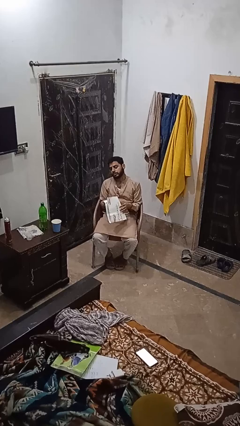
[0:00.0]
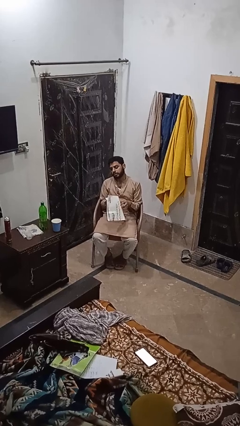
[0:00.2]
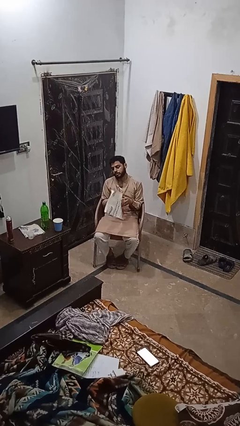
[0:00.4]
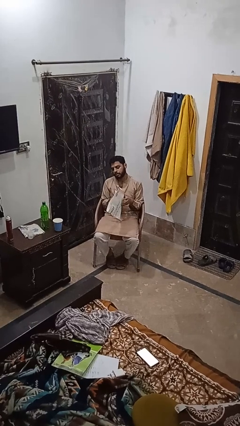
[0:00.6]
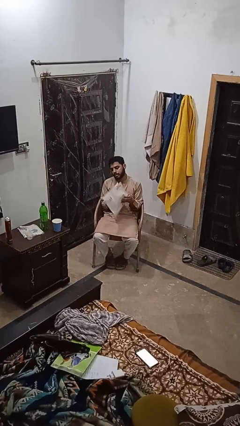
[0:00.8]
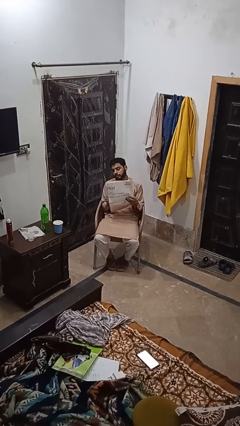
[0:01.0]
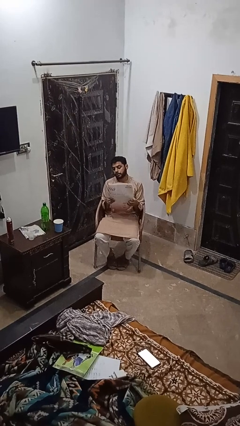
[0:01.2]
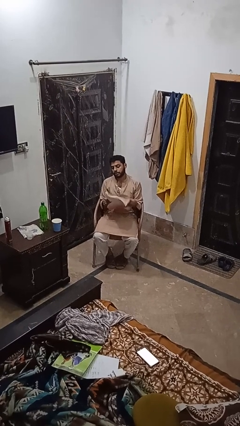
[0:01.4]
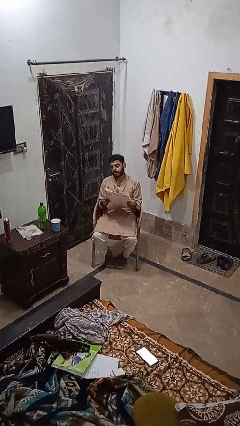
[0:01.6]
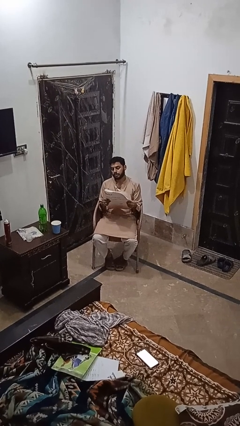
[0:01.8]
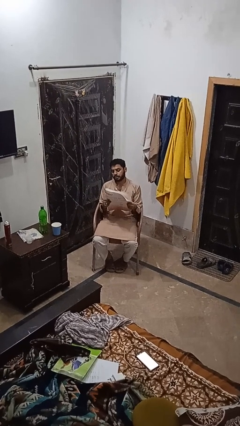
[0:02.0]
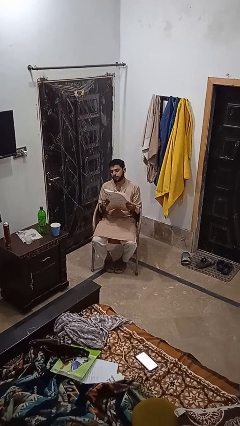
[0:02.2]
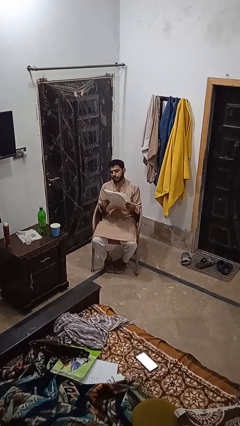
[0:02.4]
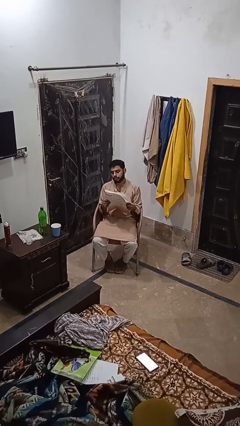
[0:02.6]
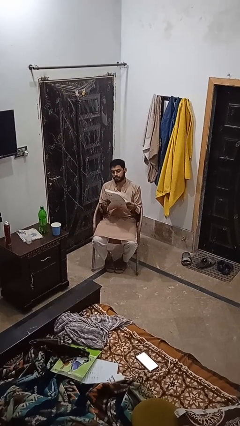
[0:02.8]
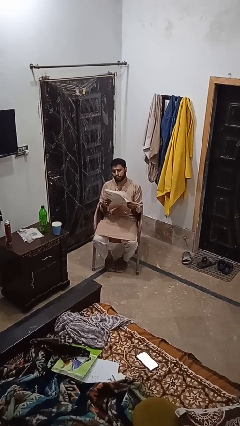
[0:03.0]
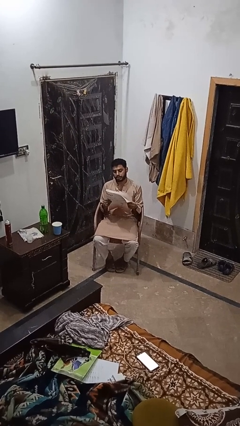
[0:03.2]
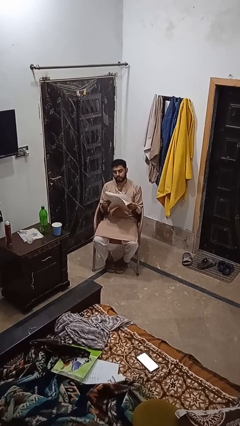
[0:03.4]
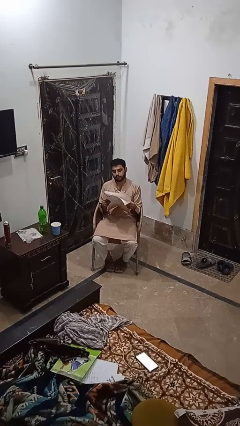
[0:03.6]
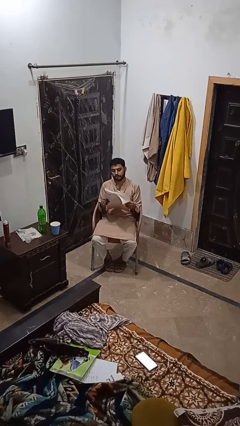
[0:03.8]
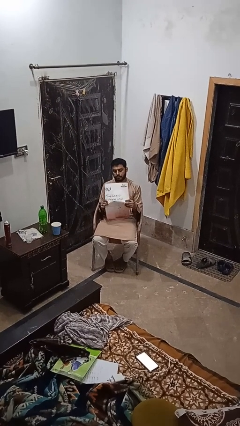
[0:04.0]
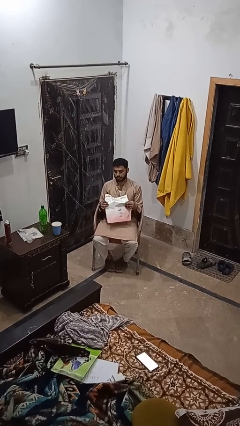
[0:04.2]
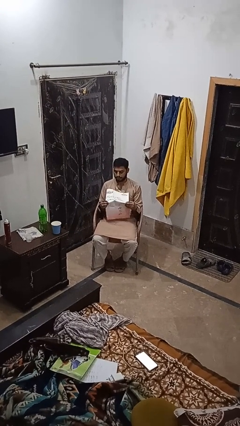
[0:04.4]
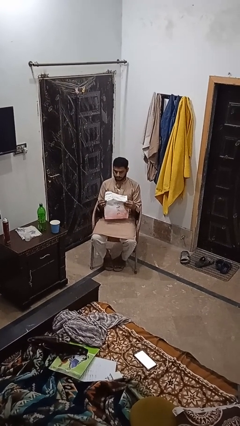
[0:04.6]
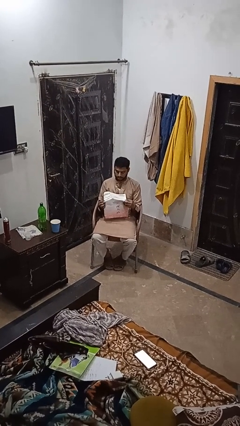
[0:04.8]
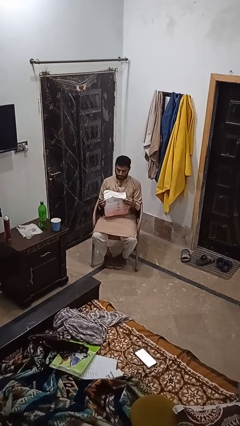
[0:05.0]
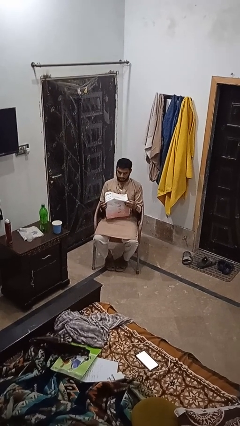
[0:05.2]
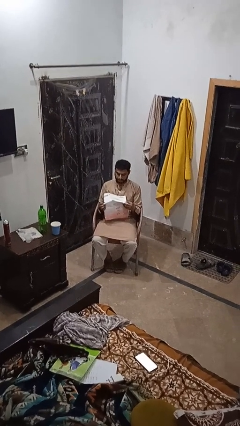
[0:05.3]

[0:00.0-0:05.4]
person reads newspaper

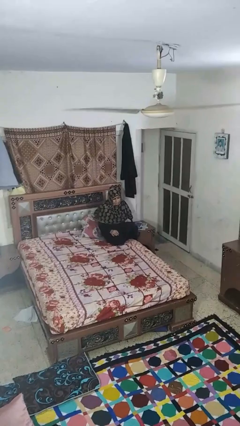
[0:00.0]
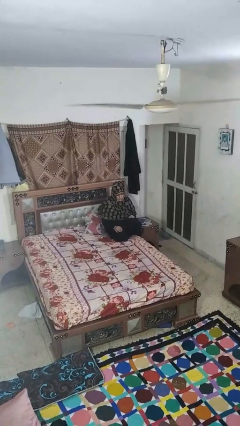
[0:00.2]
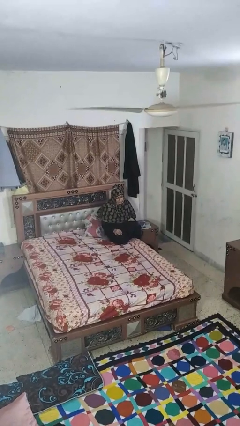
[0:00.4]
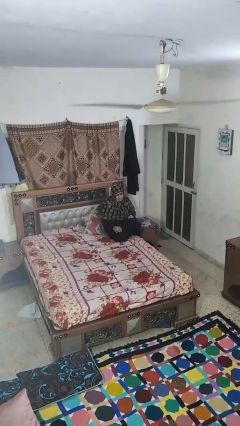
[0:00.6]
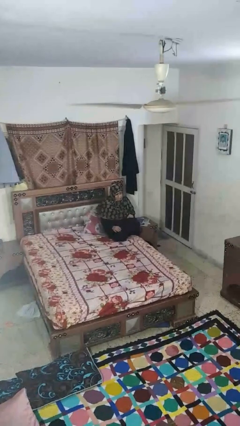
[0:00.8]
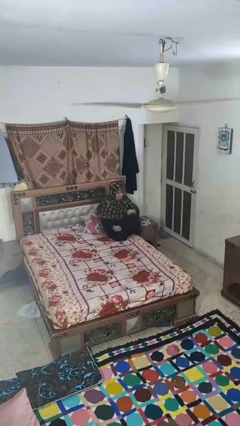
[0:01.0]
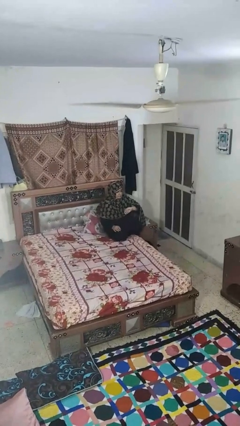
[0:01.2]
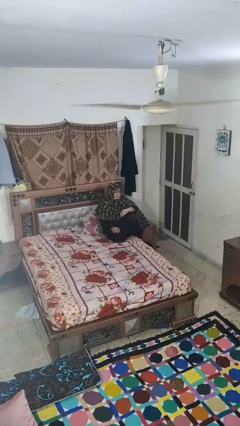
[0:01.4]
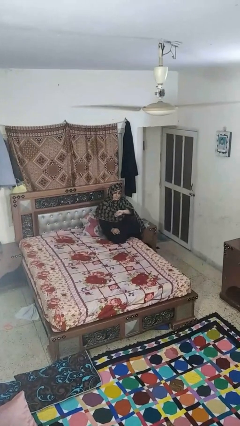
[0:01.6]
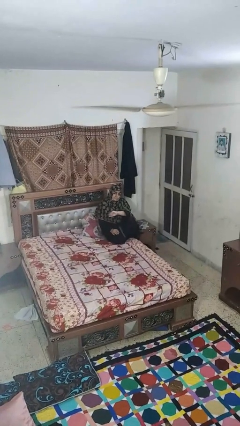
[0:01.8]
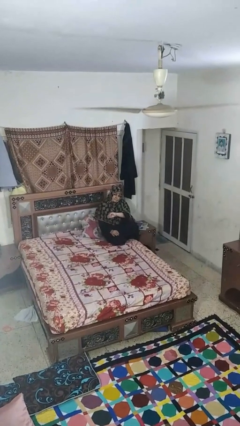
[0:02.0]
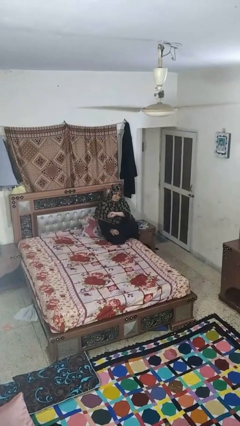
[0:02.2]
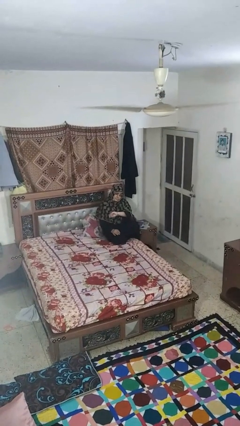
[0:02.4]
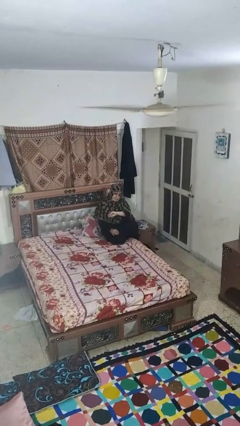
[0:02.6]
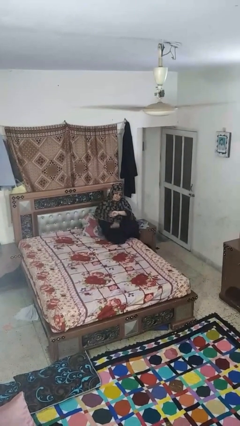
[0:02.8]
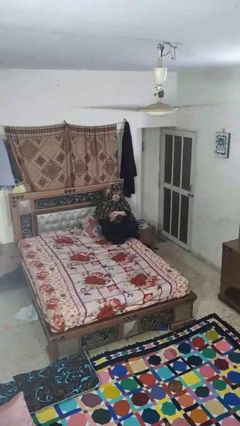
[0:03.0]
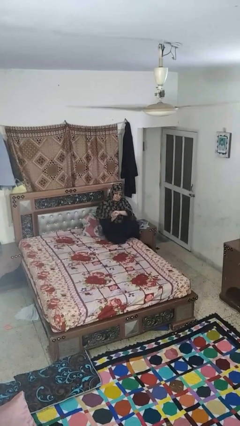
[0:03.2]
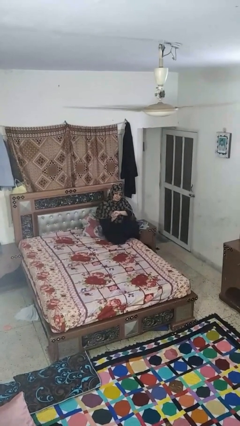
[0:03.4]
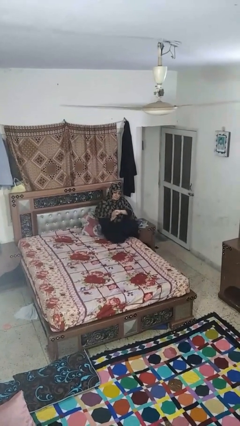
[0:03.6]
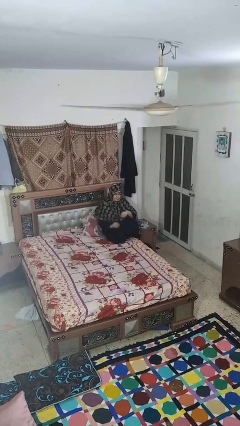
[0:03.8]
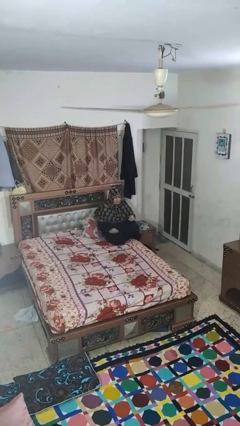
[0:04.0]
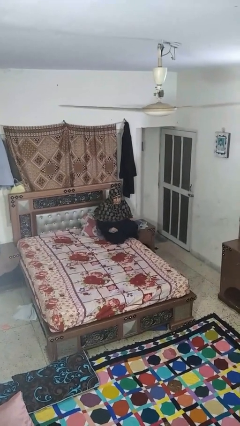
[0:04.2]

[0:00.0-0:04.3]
person looks at wristwatch

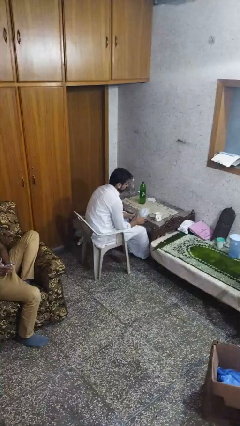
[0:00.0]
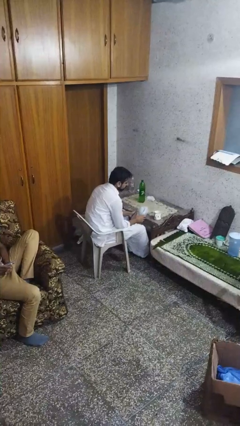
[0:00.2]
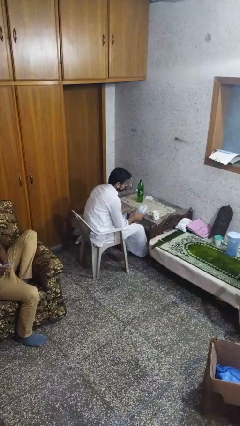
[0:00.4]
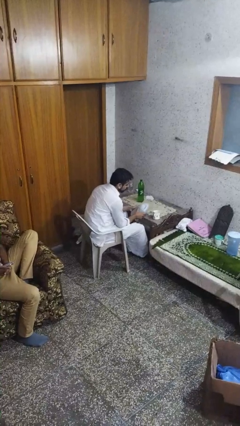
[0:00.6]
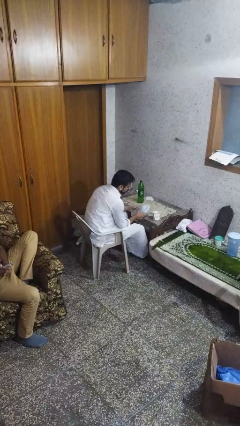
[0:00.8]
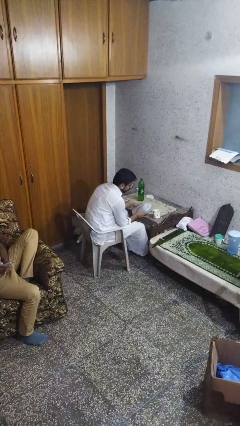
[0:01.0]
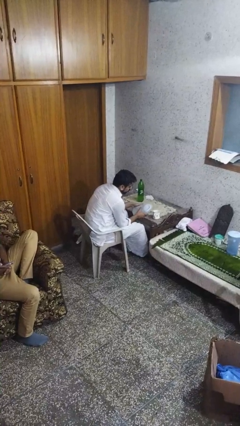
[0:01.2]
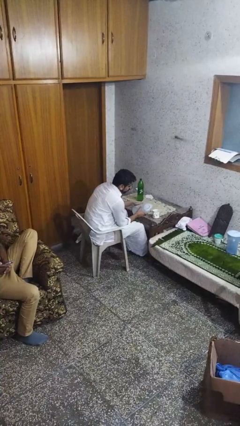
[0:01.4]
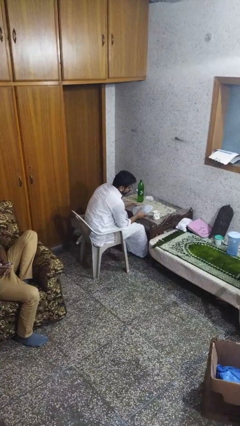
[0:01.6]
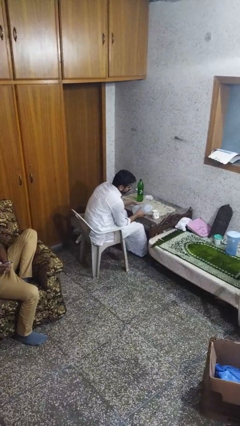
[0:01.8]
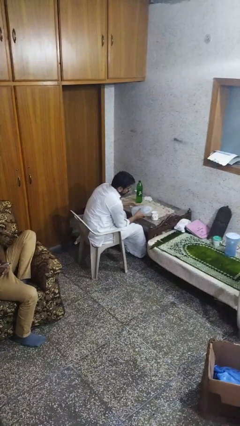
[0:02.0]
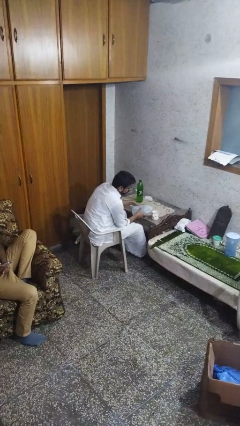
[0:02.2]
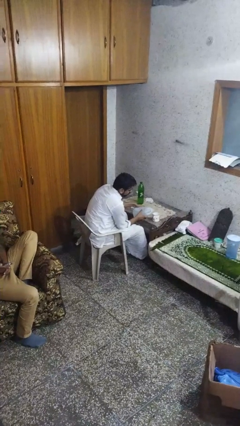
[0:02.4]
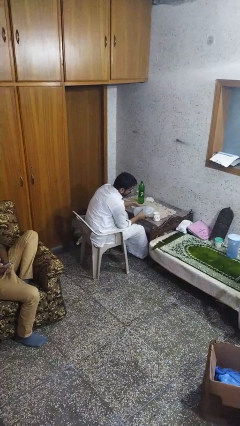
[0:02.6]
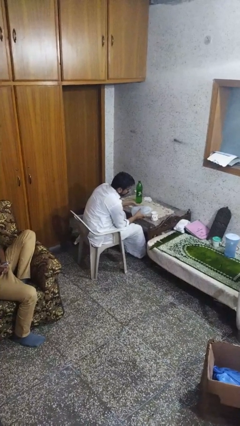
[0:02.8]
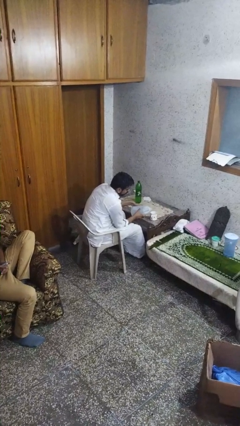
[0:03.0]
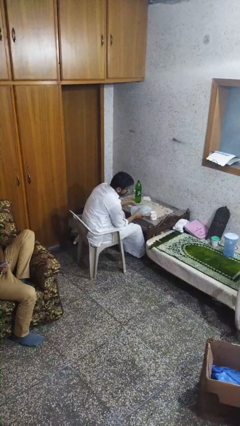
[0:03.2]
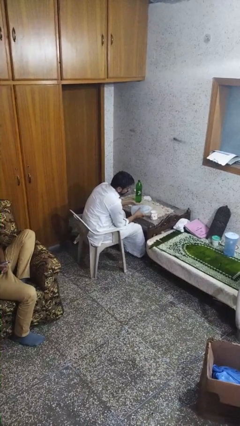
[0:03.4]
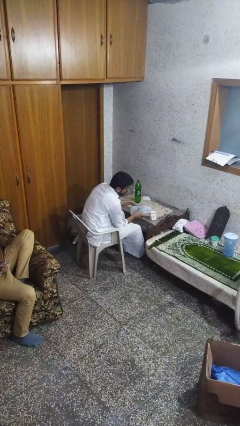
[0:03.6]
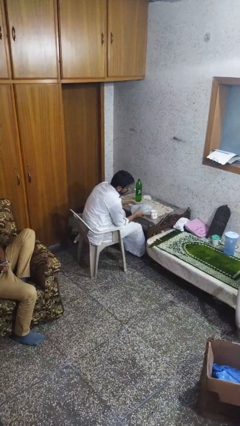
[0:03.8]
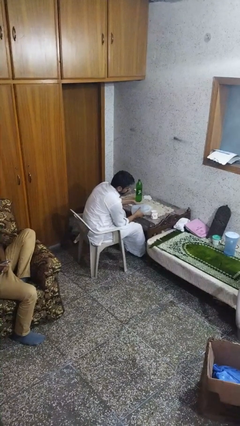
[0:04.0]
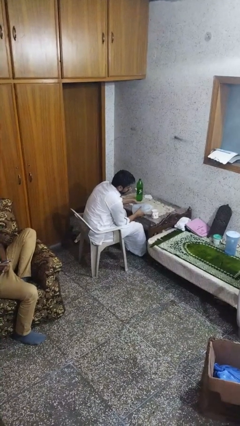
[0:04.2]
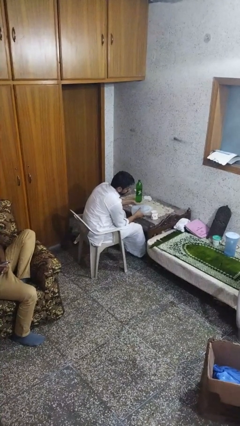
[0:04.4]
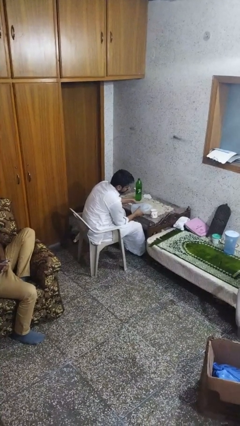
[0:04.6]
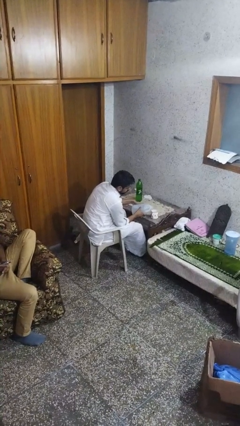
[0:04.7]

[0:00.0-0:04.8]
person pours liquid into cup

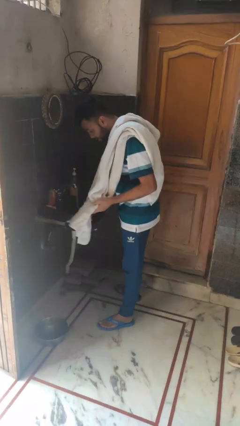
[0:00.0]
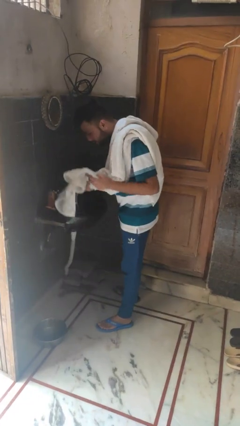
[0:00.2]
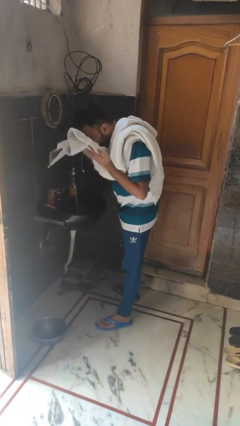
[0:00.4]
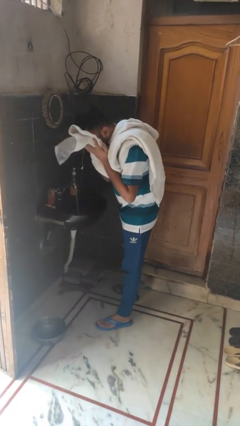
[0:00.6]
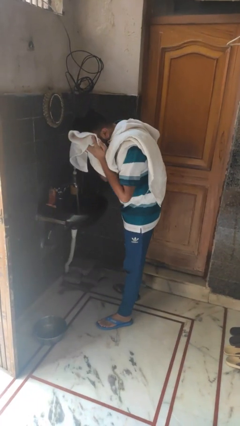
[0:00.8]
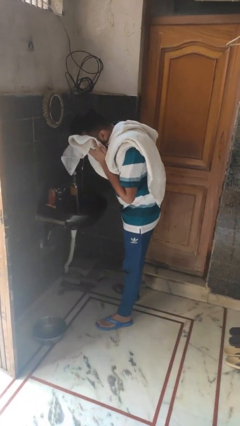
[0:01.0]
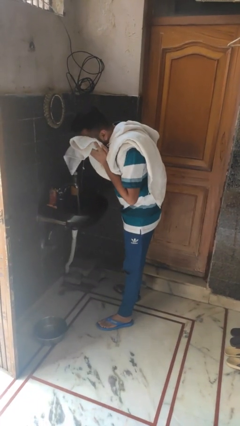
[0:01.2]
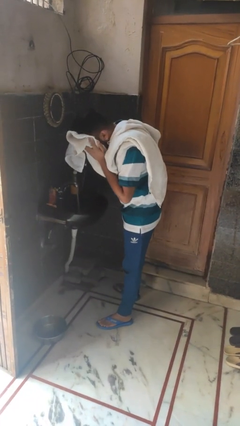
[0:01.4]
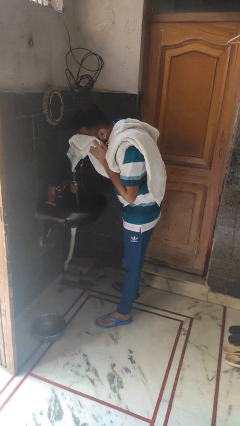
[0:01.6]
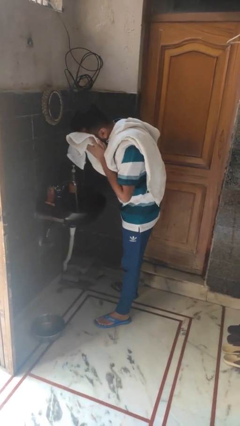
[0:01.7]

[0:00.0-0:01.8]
person dries face with towel

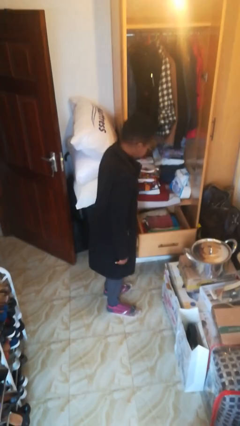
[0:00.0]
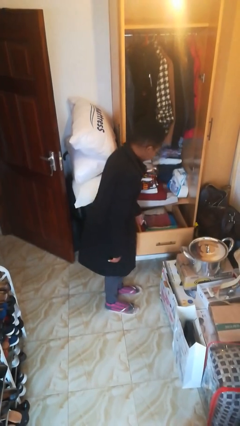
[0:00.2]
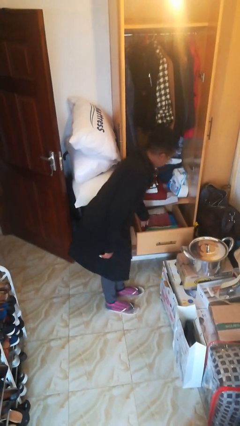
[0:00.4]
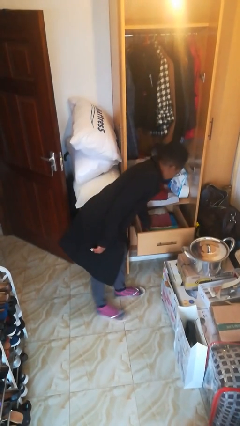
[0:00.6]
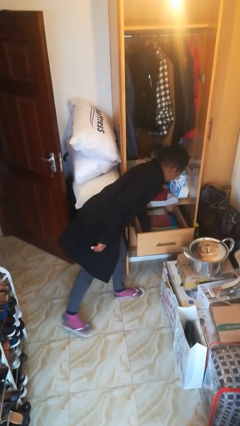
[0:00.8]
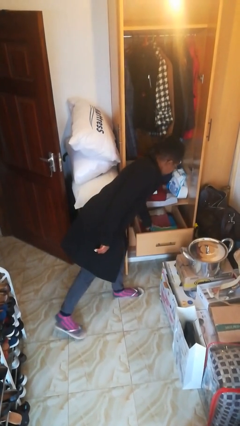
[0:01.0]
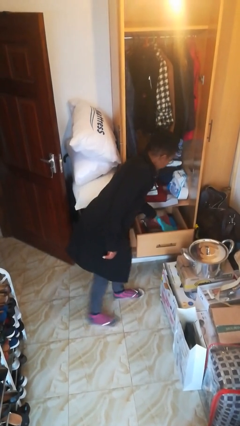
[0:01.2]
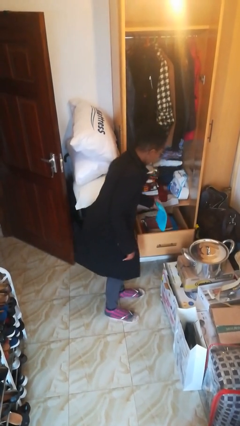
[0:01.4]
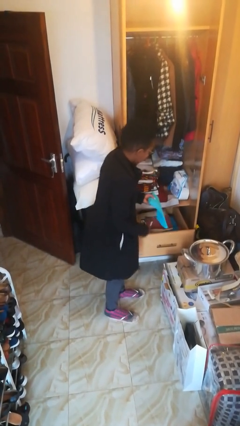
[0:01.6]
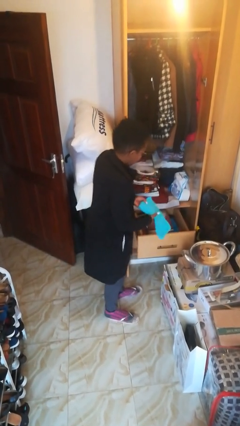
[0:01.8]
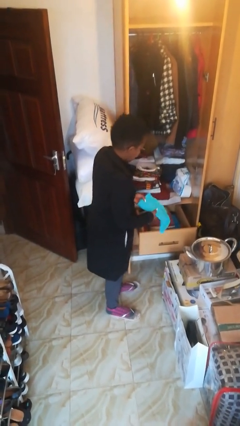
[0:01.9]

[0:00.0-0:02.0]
person takes clothes from dresser
